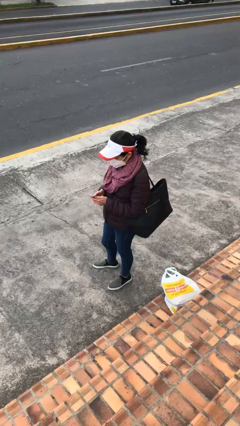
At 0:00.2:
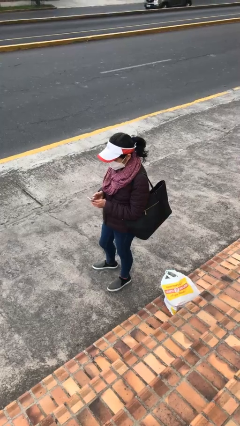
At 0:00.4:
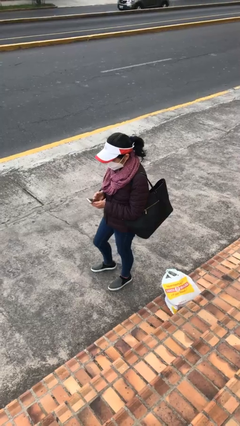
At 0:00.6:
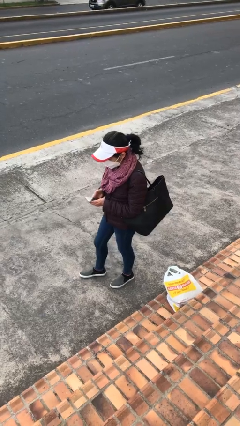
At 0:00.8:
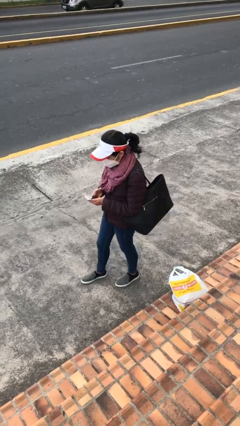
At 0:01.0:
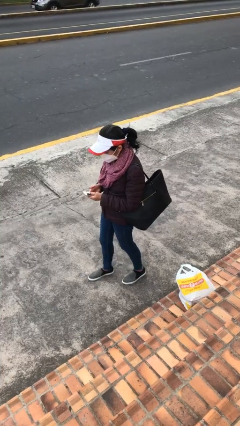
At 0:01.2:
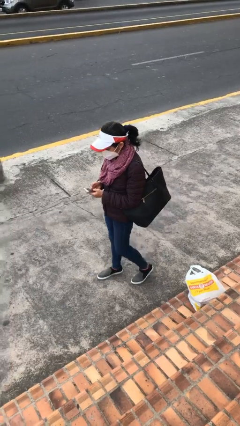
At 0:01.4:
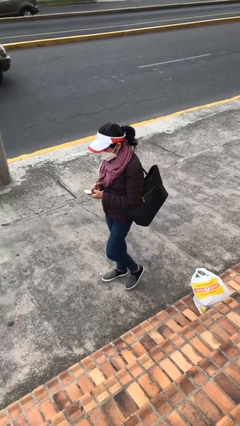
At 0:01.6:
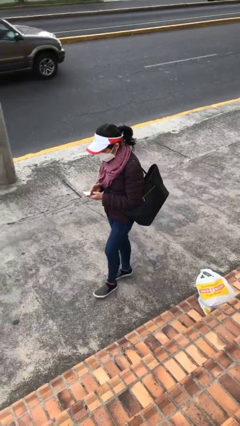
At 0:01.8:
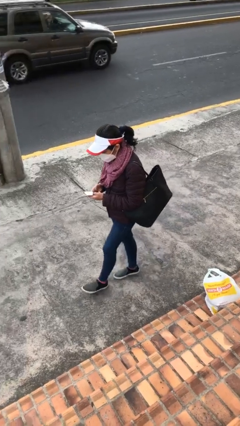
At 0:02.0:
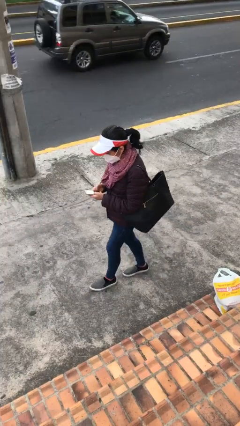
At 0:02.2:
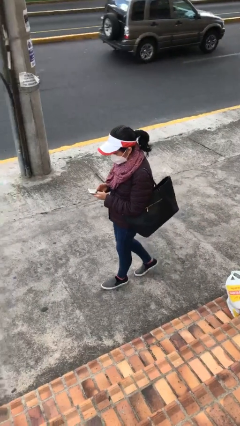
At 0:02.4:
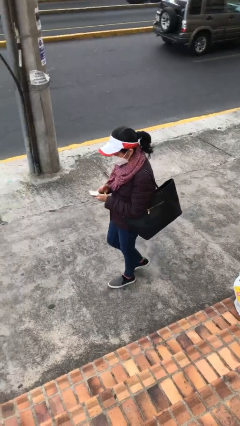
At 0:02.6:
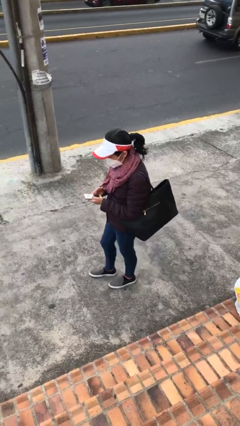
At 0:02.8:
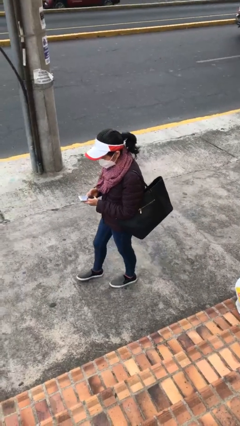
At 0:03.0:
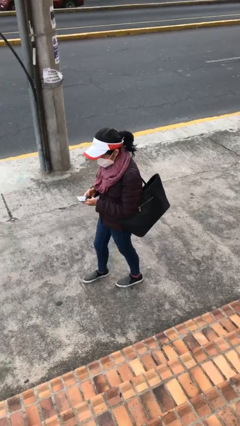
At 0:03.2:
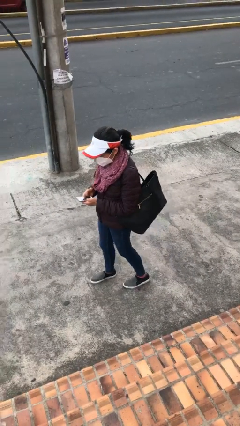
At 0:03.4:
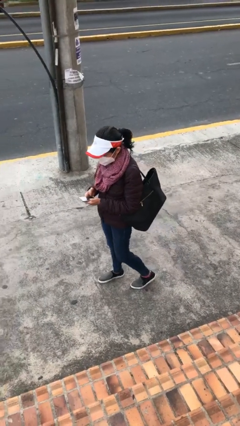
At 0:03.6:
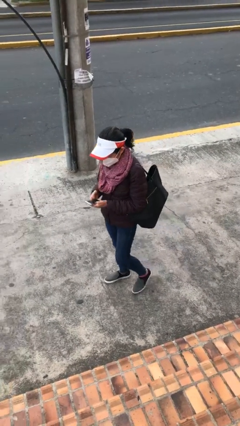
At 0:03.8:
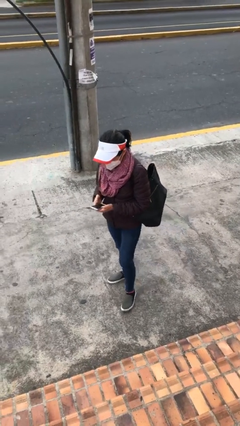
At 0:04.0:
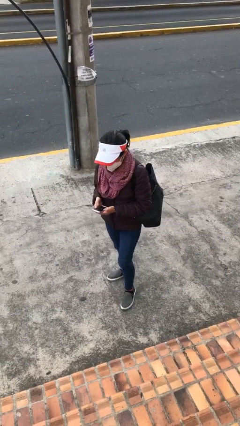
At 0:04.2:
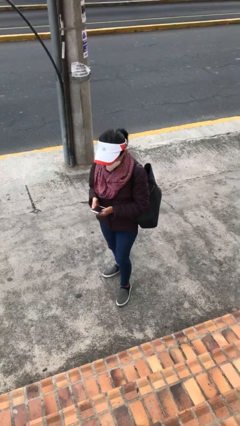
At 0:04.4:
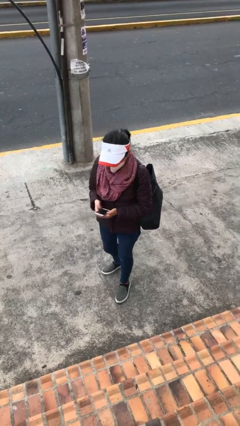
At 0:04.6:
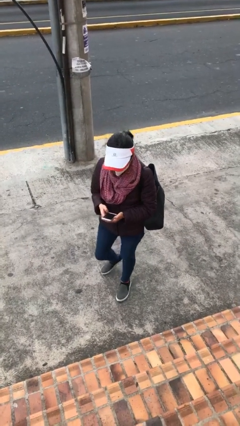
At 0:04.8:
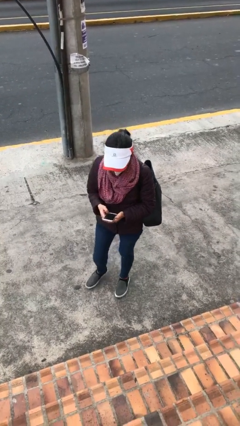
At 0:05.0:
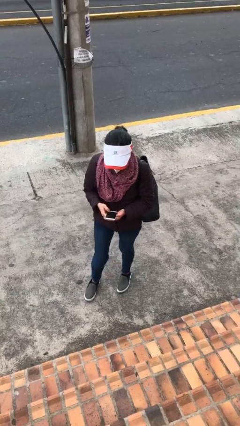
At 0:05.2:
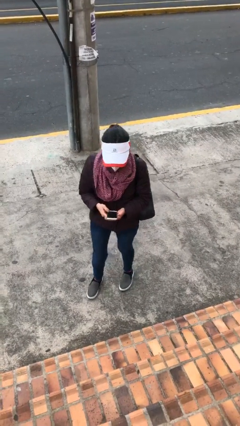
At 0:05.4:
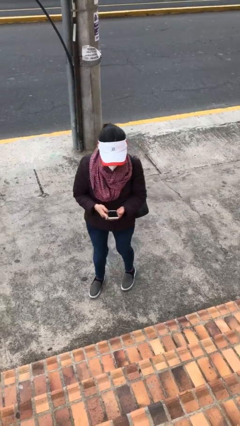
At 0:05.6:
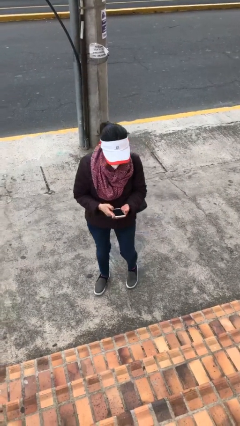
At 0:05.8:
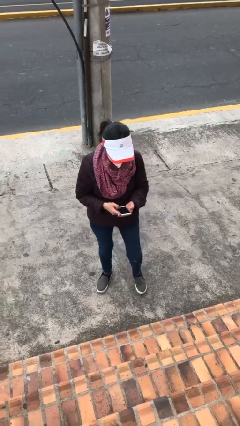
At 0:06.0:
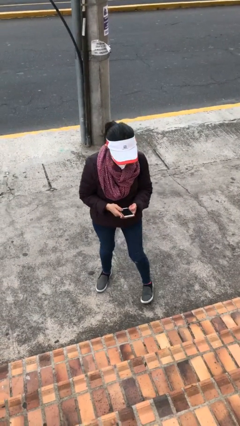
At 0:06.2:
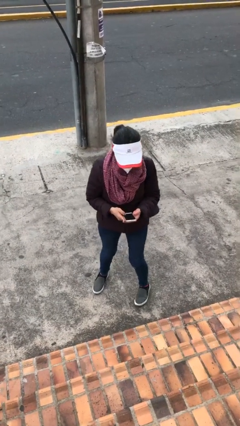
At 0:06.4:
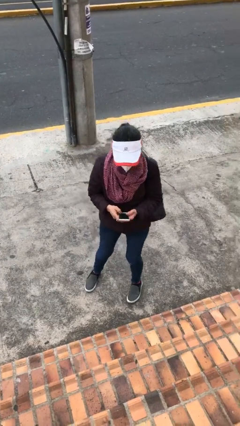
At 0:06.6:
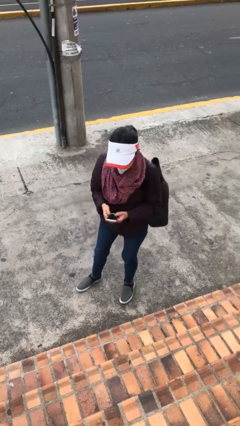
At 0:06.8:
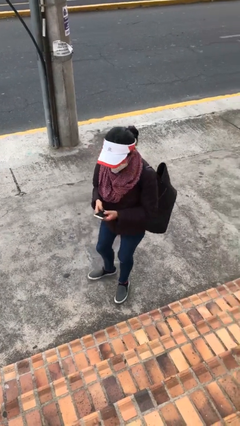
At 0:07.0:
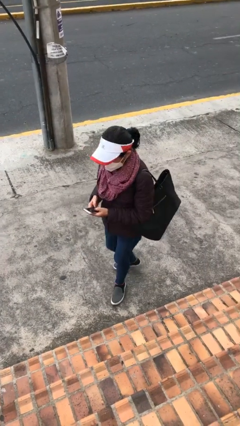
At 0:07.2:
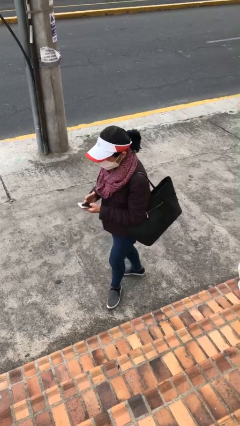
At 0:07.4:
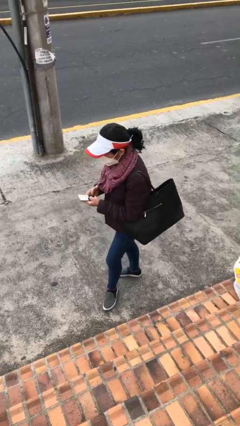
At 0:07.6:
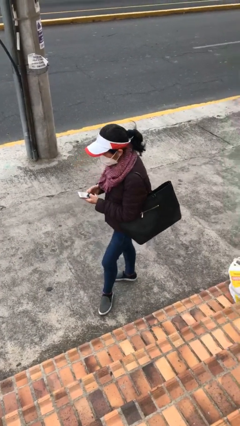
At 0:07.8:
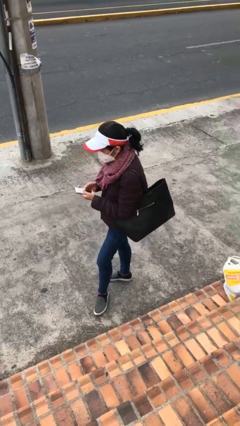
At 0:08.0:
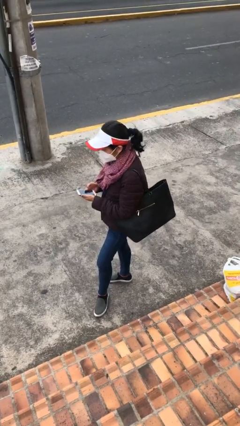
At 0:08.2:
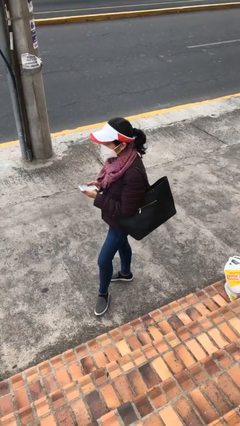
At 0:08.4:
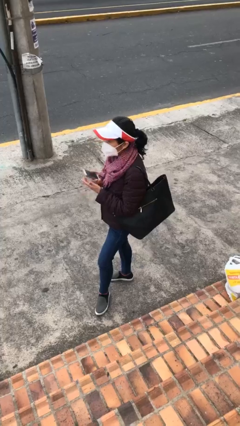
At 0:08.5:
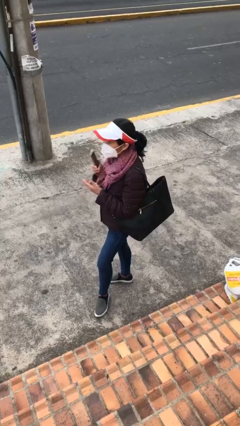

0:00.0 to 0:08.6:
person texts on phone

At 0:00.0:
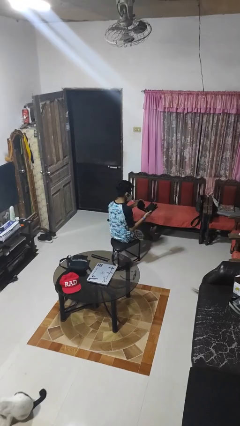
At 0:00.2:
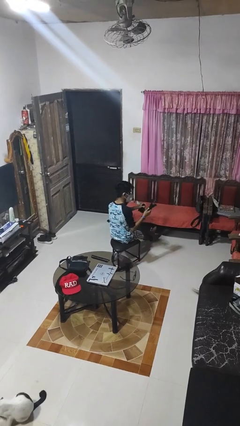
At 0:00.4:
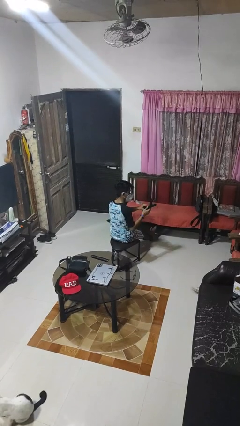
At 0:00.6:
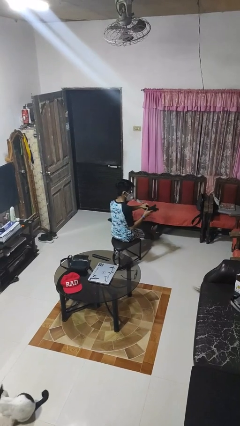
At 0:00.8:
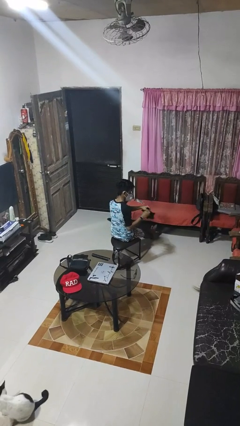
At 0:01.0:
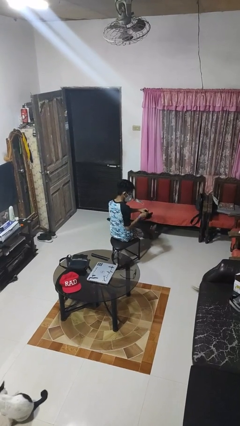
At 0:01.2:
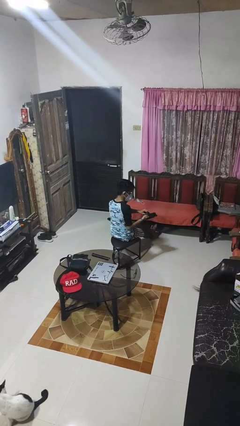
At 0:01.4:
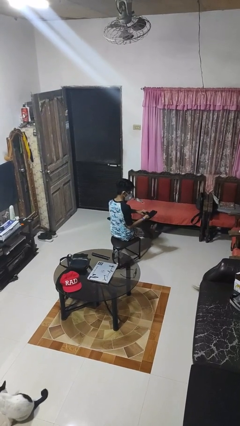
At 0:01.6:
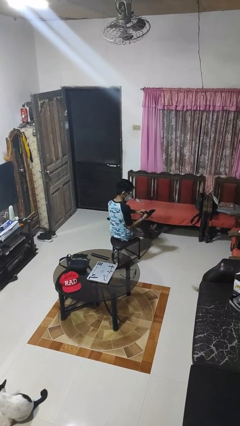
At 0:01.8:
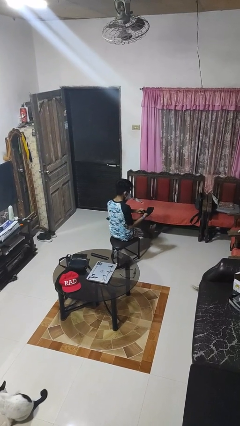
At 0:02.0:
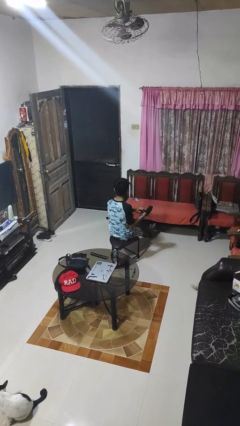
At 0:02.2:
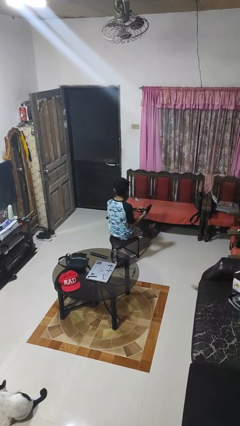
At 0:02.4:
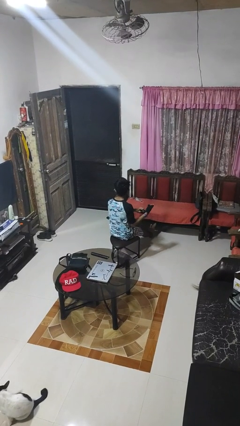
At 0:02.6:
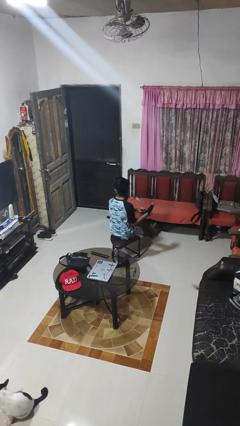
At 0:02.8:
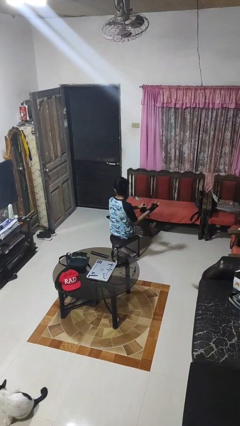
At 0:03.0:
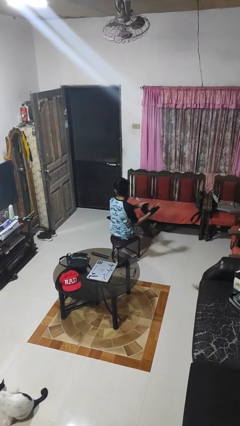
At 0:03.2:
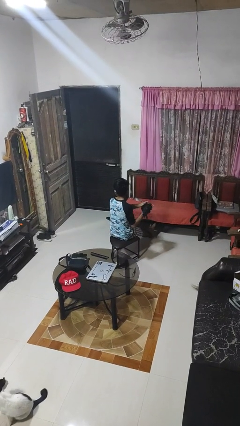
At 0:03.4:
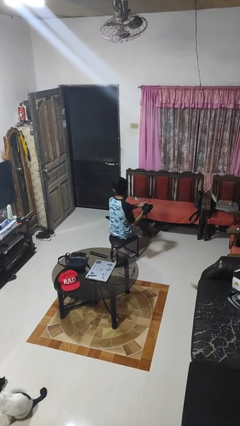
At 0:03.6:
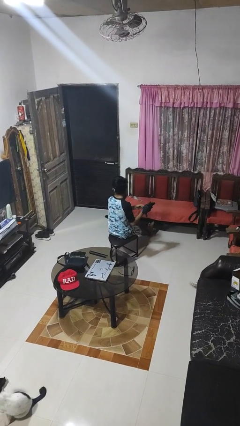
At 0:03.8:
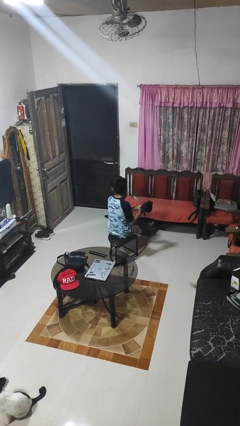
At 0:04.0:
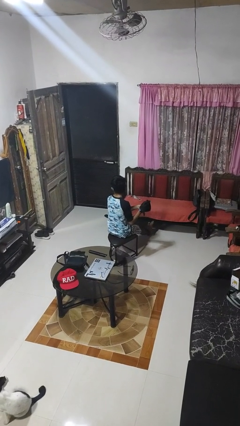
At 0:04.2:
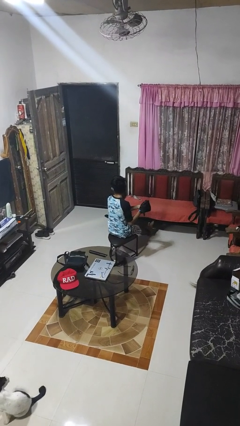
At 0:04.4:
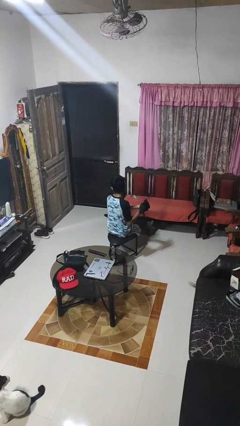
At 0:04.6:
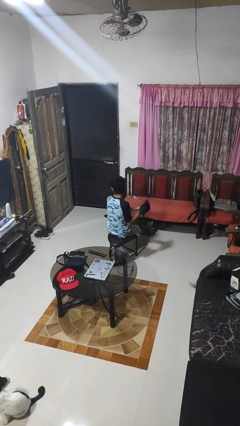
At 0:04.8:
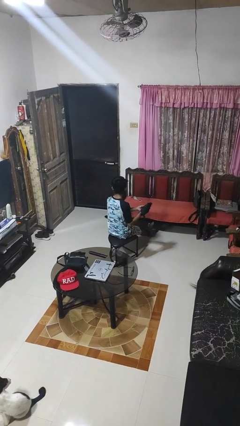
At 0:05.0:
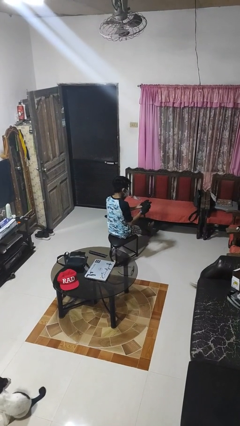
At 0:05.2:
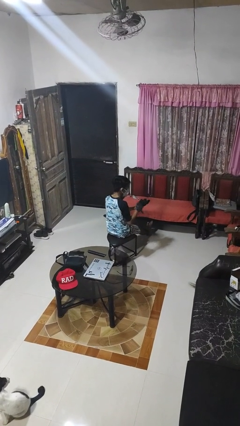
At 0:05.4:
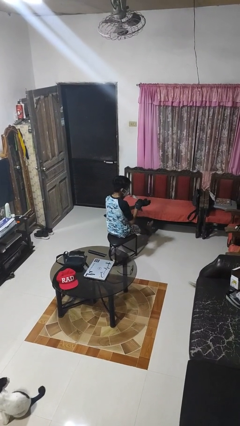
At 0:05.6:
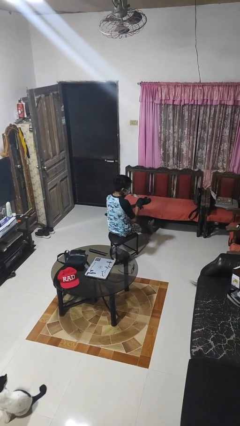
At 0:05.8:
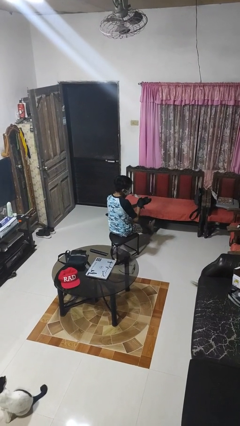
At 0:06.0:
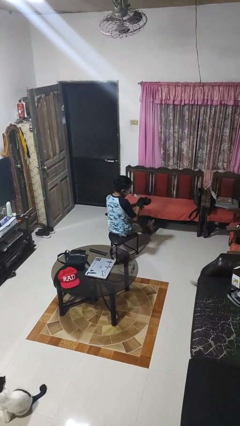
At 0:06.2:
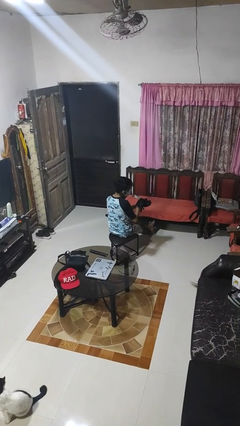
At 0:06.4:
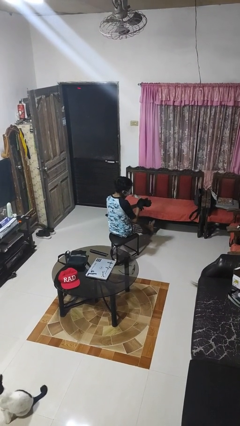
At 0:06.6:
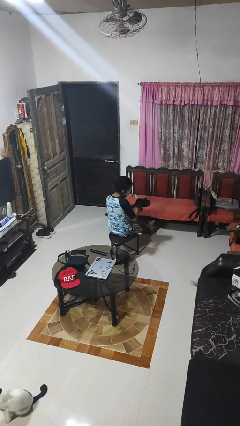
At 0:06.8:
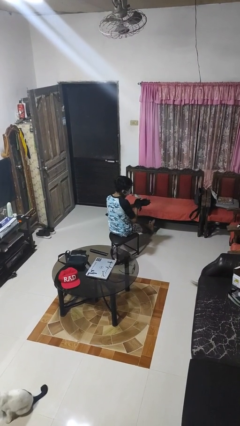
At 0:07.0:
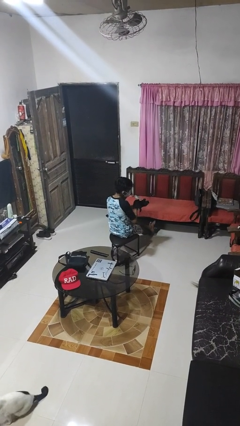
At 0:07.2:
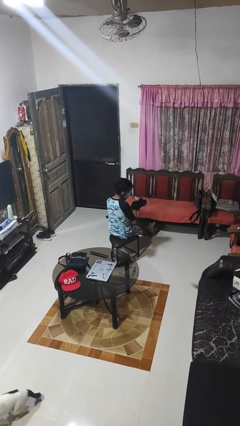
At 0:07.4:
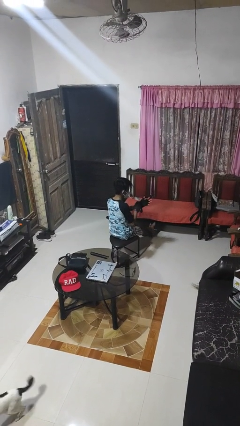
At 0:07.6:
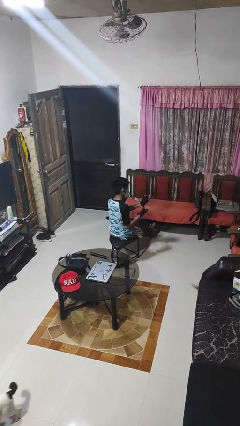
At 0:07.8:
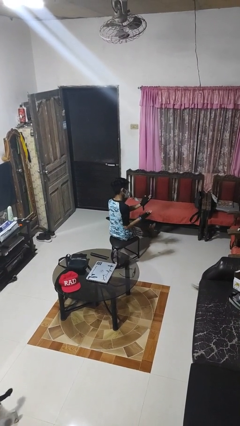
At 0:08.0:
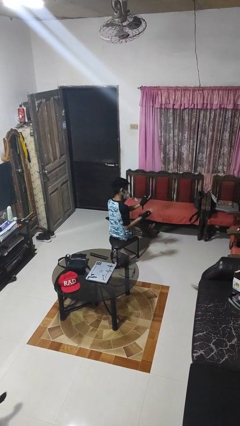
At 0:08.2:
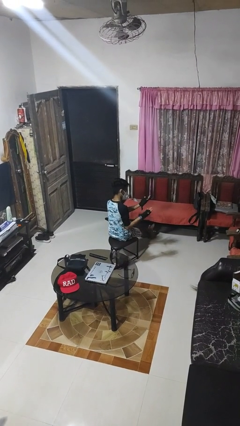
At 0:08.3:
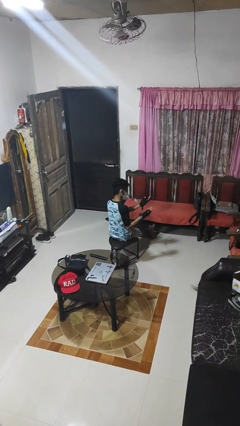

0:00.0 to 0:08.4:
person puts on gloves

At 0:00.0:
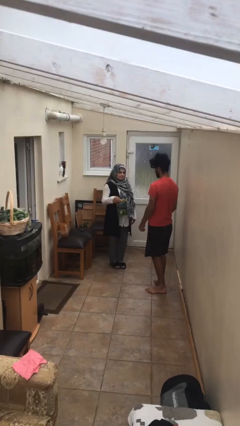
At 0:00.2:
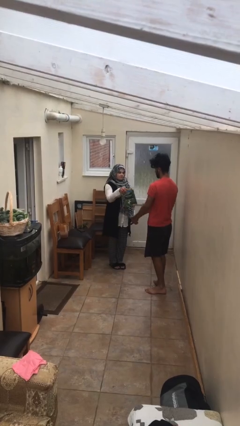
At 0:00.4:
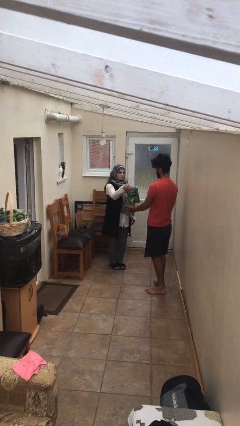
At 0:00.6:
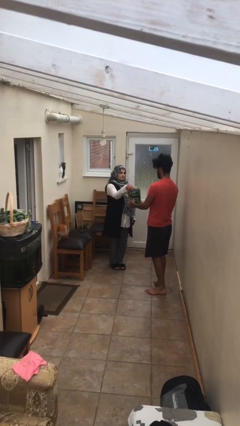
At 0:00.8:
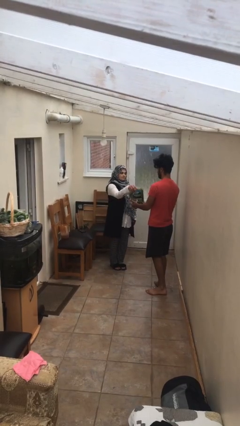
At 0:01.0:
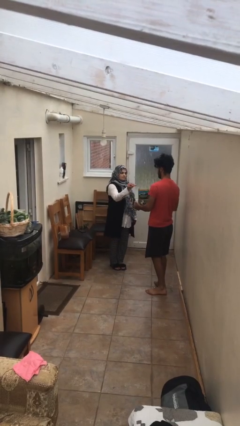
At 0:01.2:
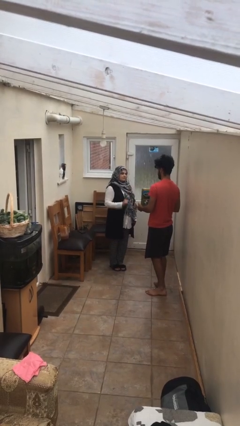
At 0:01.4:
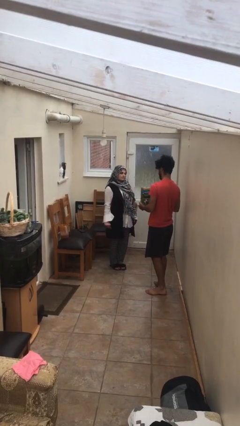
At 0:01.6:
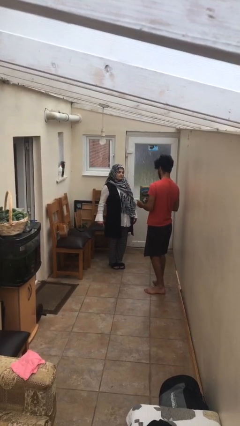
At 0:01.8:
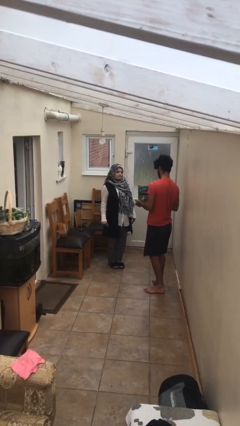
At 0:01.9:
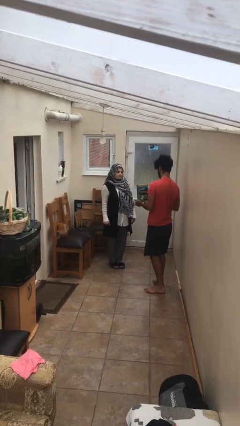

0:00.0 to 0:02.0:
person transfers object to person
